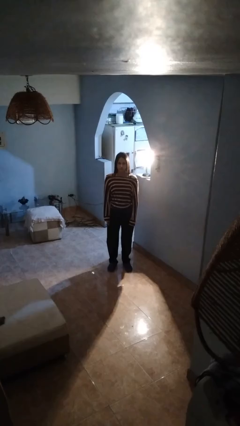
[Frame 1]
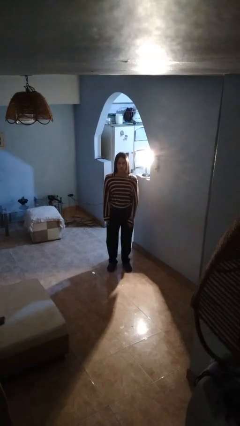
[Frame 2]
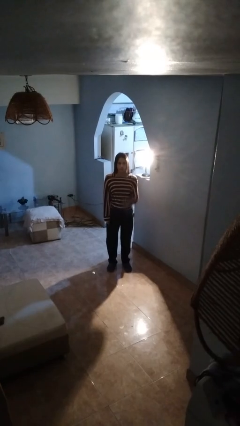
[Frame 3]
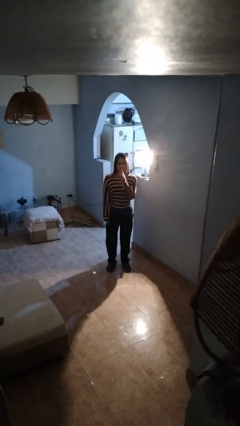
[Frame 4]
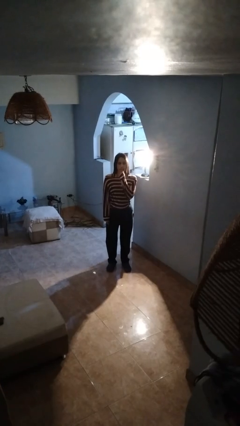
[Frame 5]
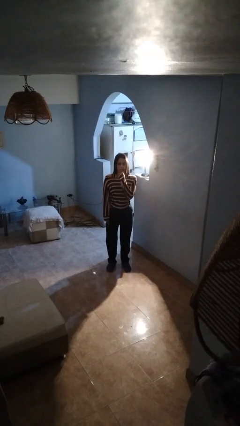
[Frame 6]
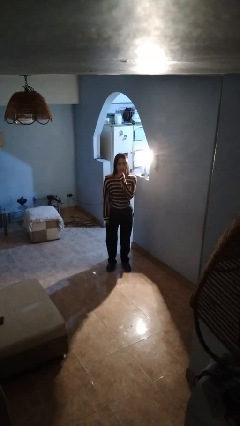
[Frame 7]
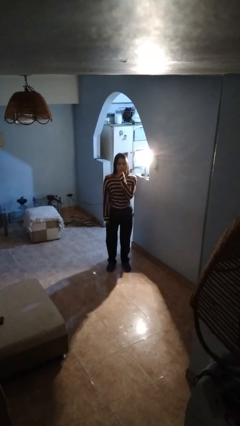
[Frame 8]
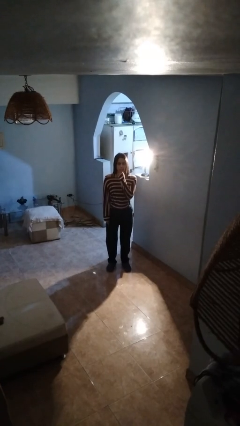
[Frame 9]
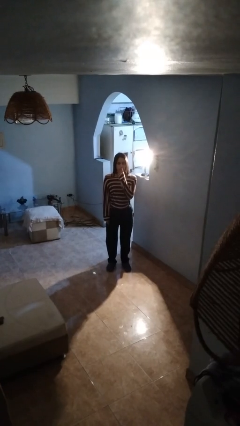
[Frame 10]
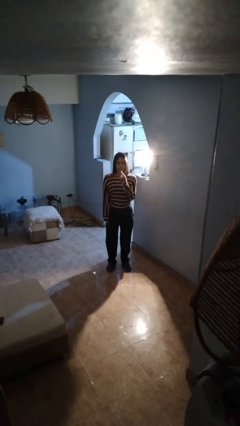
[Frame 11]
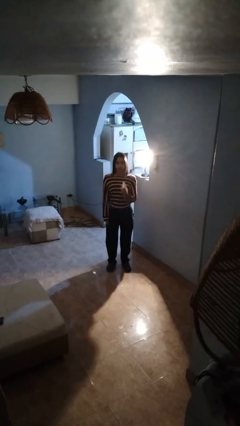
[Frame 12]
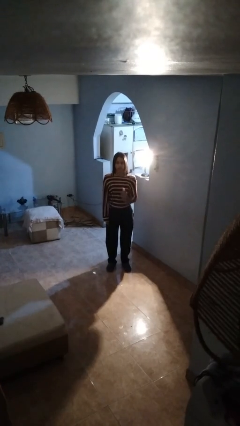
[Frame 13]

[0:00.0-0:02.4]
person gestures be quiet

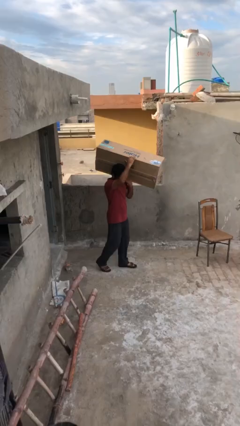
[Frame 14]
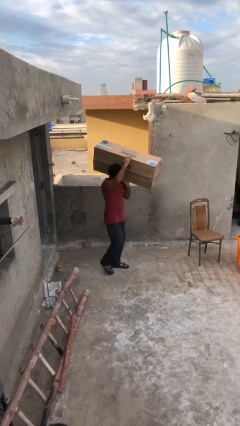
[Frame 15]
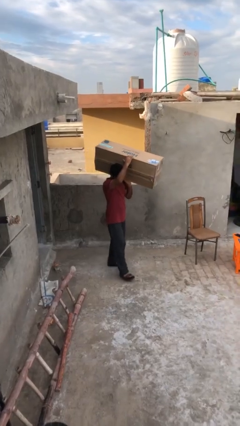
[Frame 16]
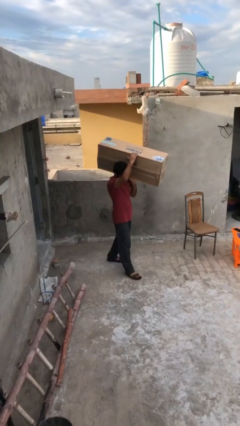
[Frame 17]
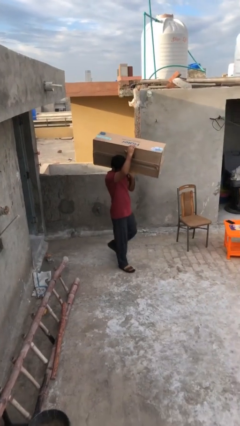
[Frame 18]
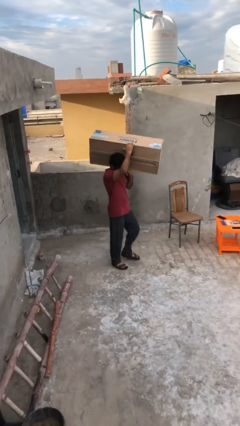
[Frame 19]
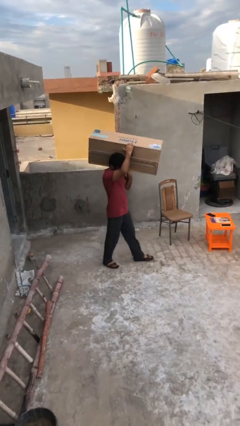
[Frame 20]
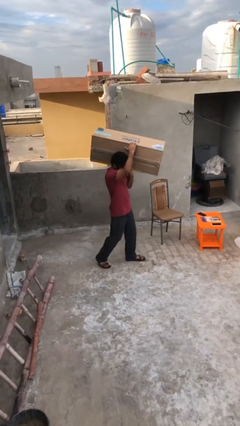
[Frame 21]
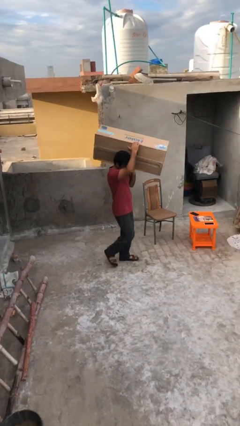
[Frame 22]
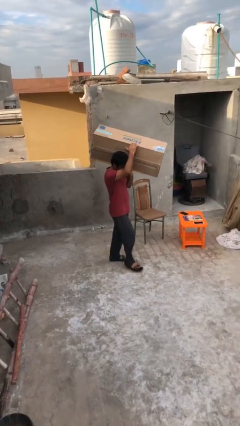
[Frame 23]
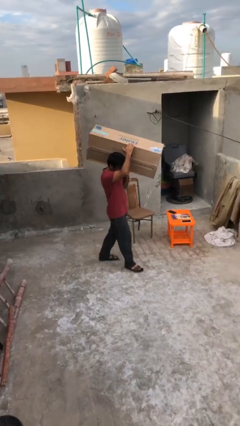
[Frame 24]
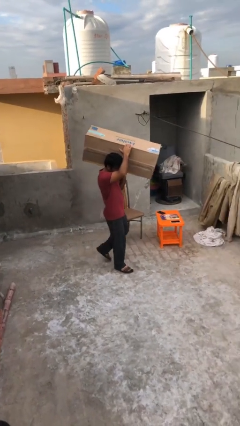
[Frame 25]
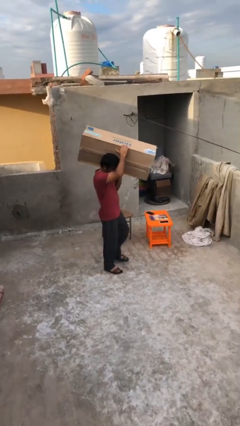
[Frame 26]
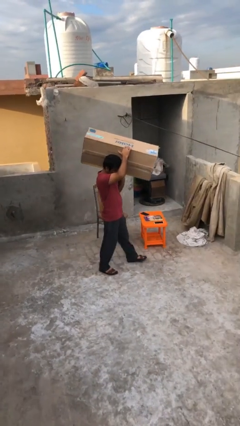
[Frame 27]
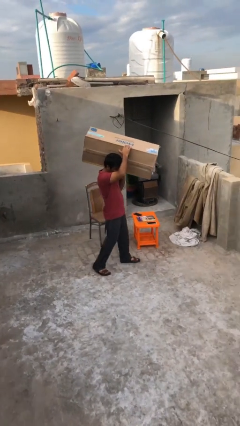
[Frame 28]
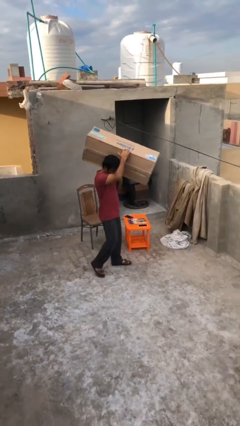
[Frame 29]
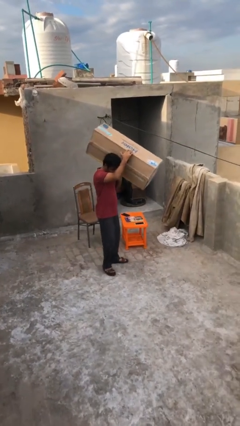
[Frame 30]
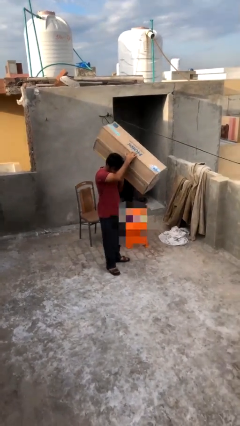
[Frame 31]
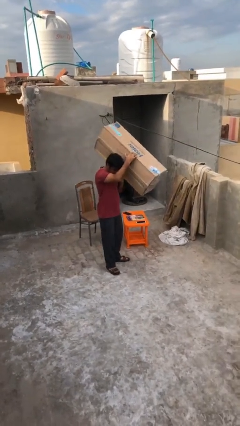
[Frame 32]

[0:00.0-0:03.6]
person carries heavy object

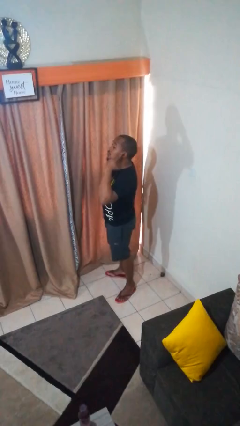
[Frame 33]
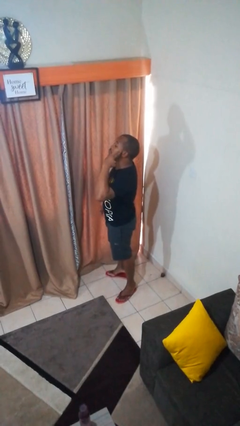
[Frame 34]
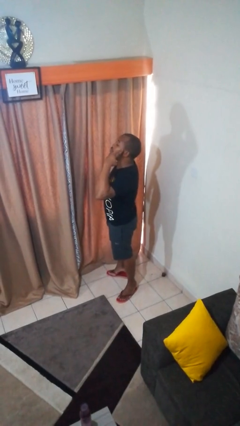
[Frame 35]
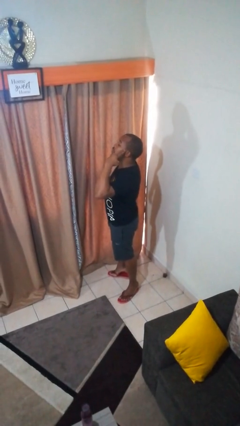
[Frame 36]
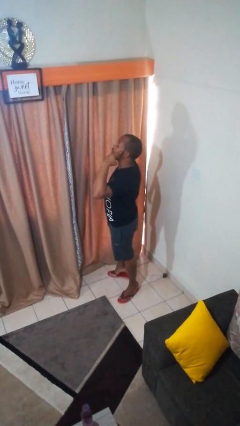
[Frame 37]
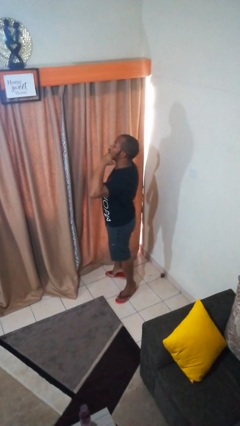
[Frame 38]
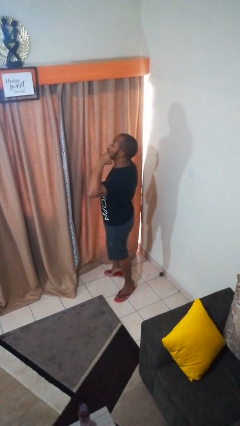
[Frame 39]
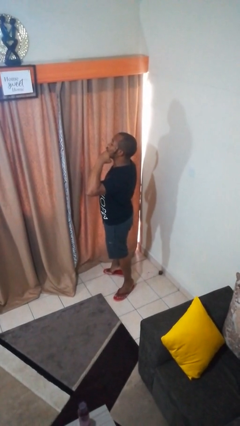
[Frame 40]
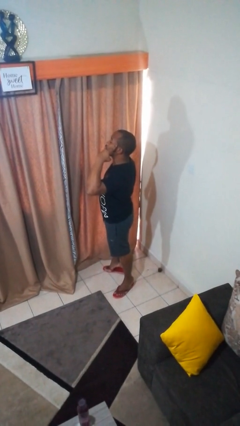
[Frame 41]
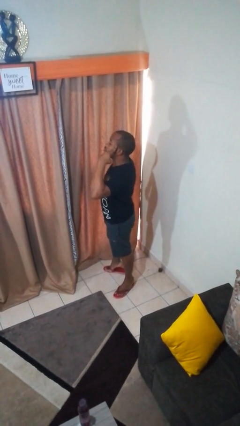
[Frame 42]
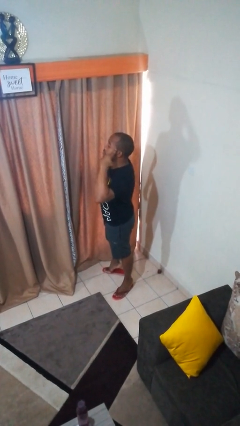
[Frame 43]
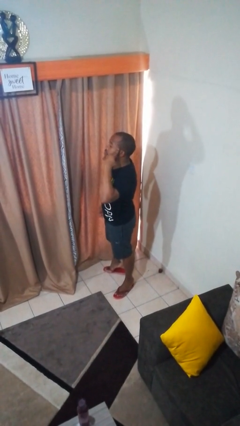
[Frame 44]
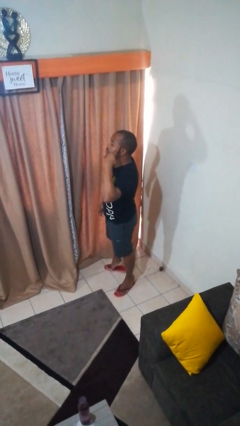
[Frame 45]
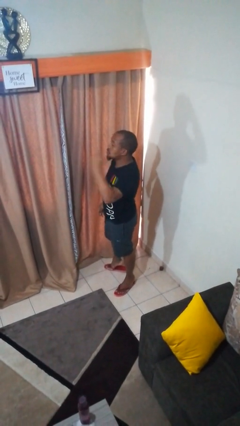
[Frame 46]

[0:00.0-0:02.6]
person gestures call me

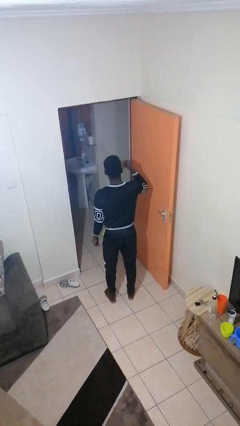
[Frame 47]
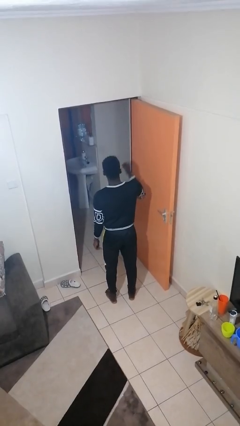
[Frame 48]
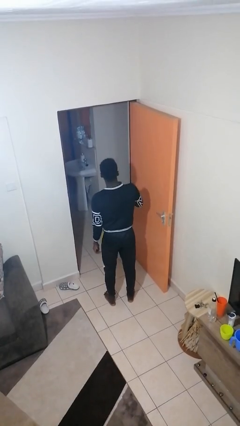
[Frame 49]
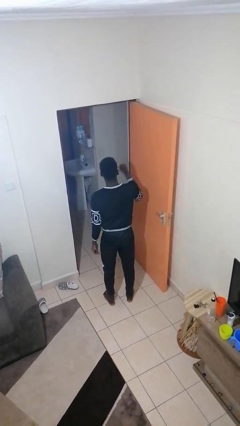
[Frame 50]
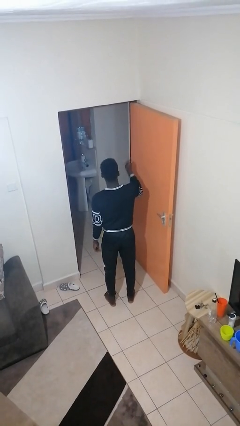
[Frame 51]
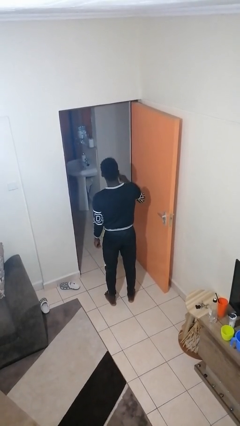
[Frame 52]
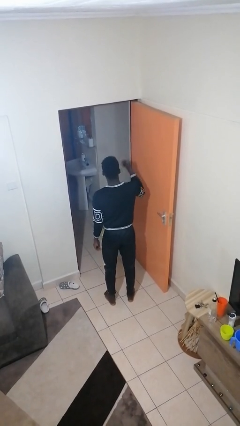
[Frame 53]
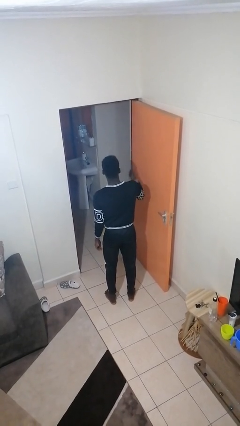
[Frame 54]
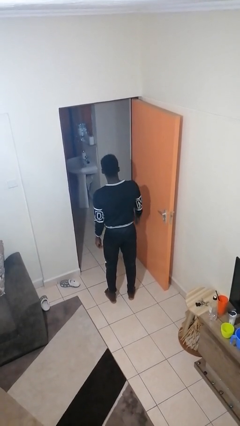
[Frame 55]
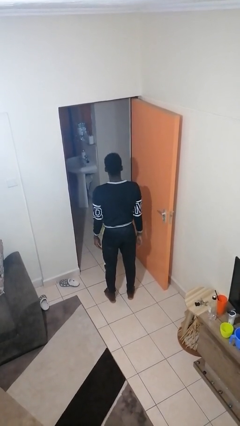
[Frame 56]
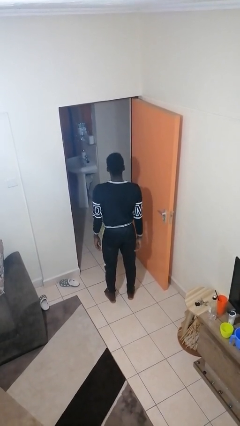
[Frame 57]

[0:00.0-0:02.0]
person snaps fingers

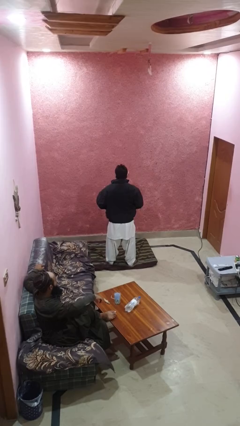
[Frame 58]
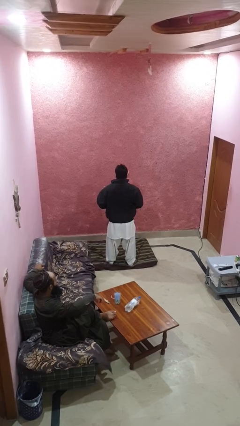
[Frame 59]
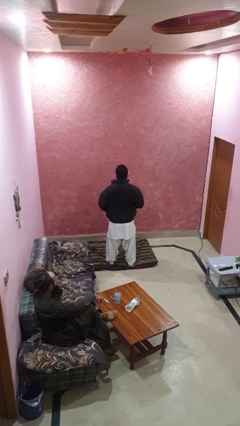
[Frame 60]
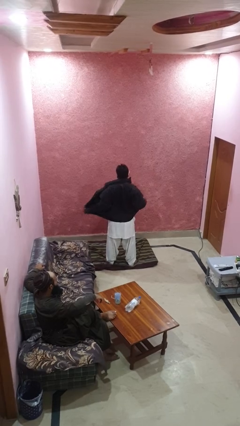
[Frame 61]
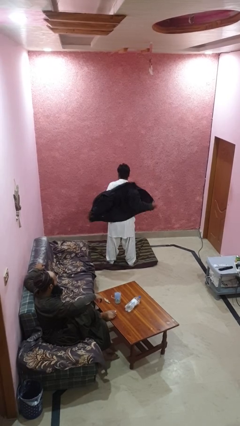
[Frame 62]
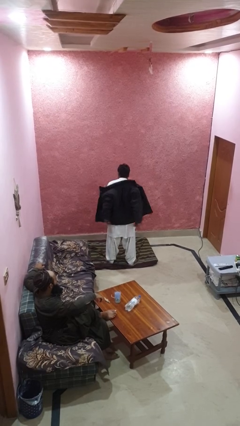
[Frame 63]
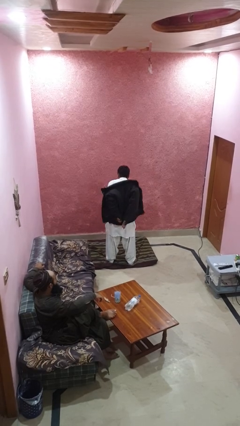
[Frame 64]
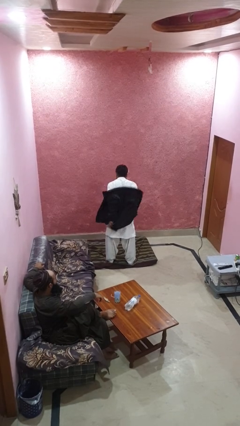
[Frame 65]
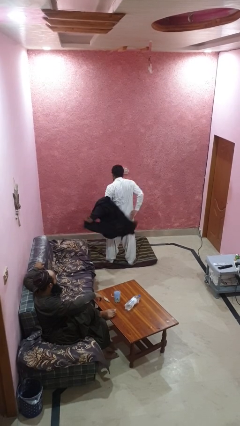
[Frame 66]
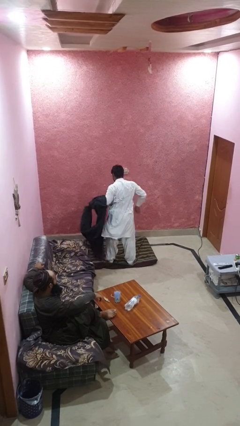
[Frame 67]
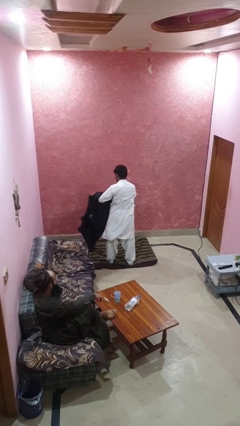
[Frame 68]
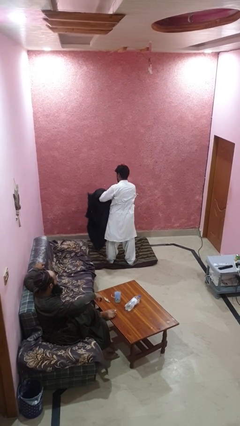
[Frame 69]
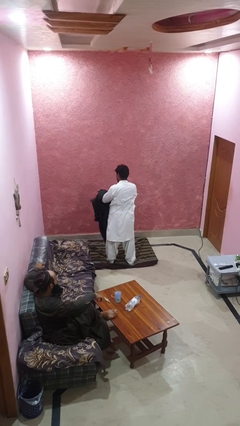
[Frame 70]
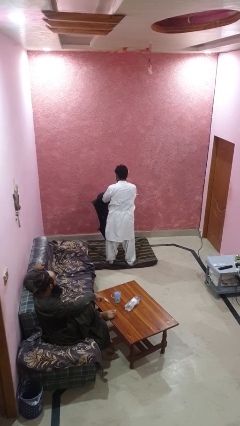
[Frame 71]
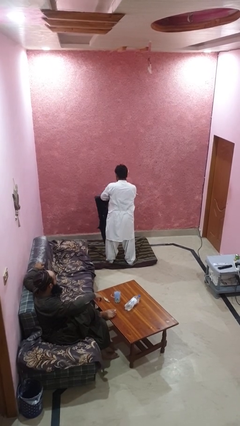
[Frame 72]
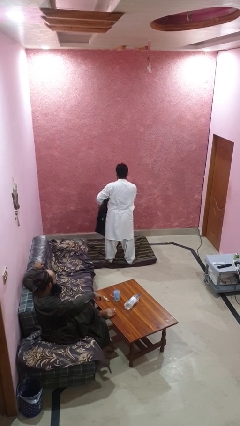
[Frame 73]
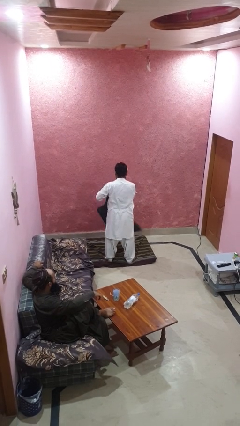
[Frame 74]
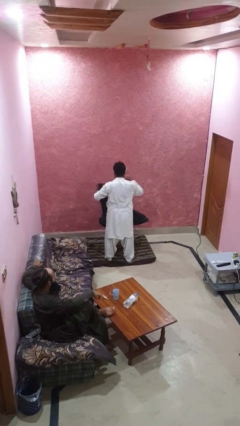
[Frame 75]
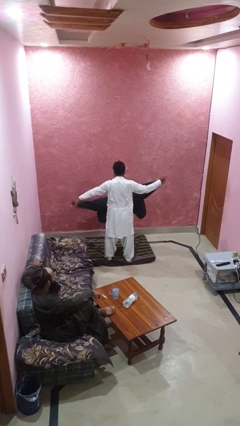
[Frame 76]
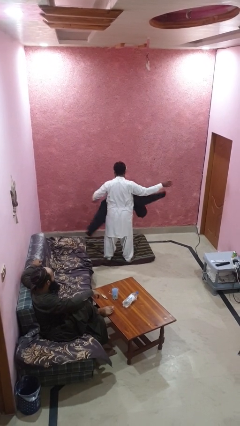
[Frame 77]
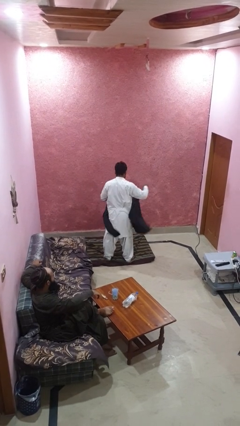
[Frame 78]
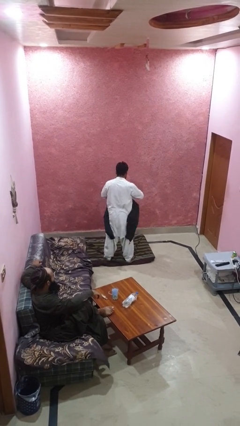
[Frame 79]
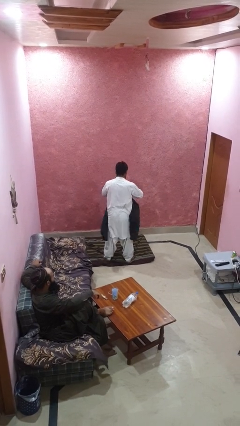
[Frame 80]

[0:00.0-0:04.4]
person takes off jacket

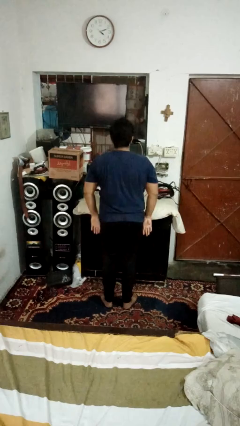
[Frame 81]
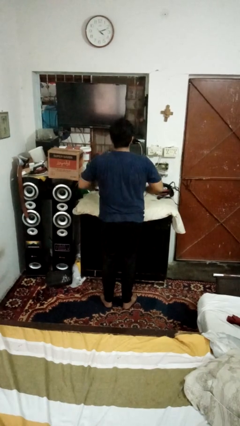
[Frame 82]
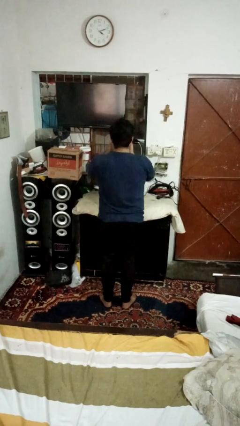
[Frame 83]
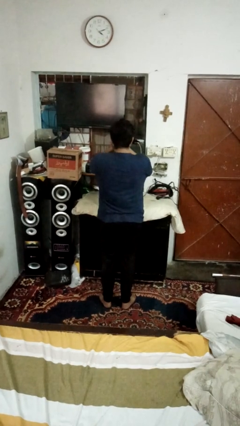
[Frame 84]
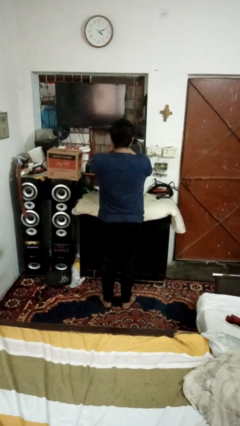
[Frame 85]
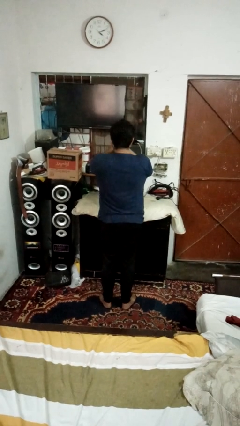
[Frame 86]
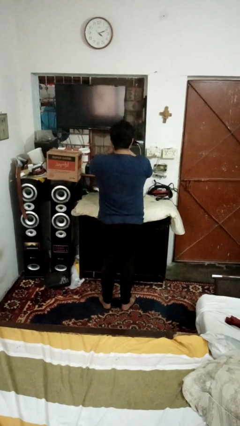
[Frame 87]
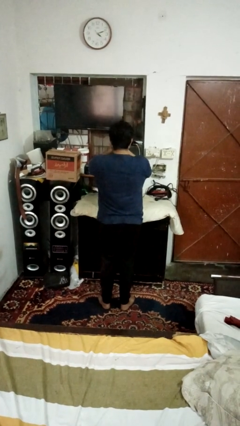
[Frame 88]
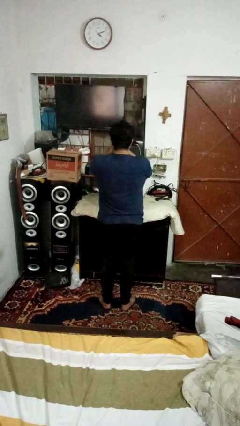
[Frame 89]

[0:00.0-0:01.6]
person covers face with hands

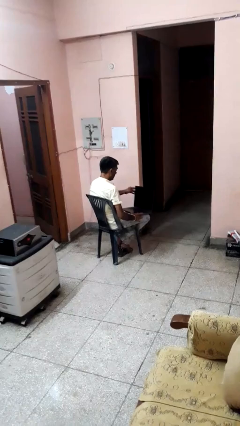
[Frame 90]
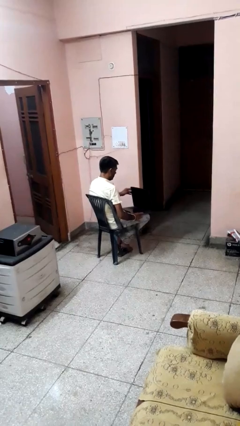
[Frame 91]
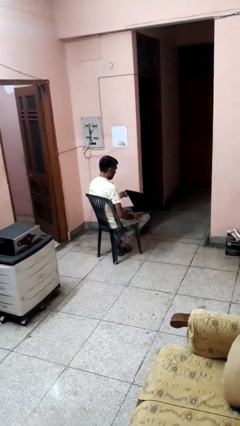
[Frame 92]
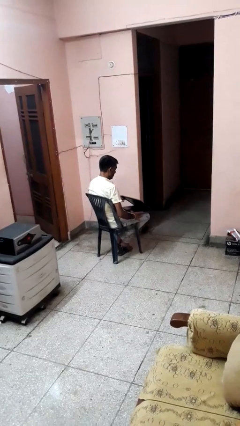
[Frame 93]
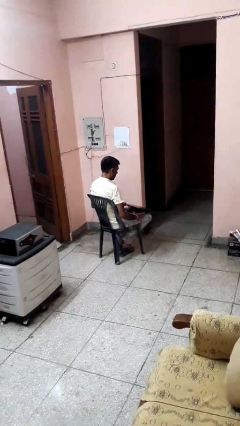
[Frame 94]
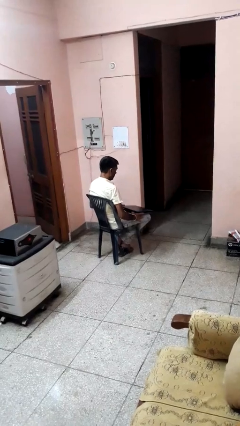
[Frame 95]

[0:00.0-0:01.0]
person closes laptop
